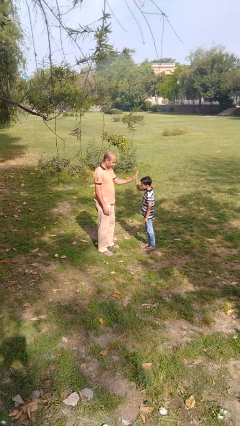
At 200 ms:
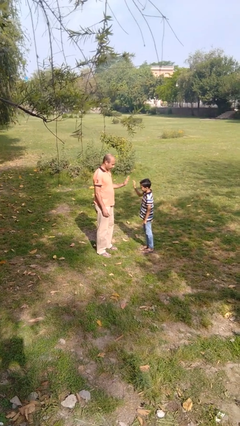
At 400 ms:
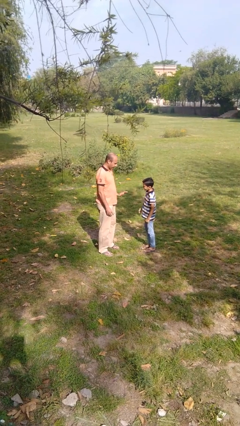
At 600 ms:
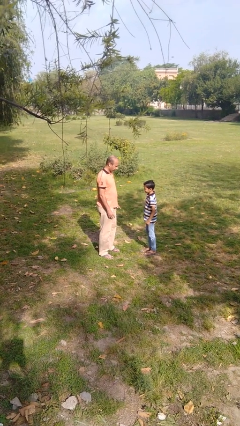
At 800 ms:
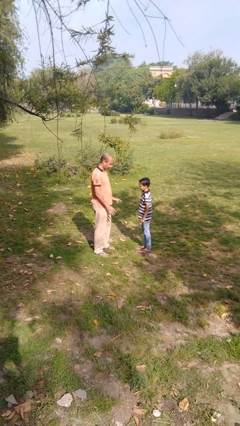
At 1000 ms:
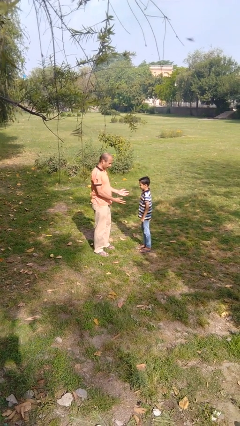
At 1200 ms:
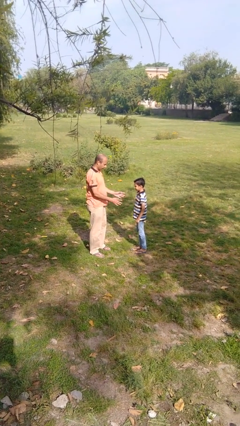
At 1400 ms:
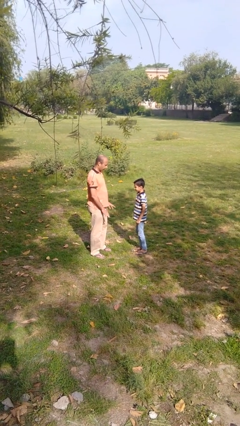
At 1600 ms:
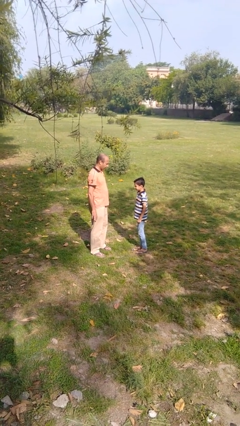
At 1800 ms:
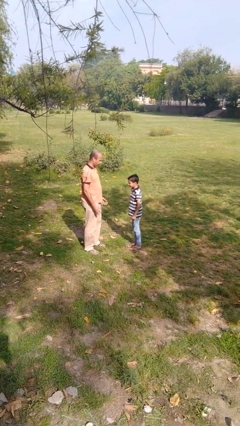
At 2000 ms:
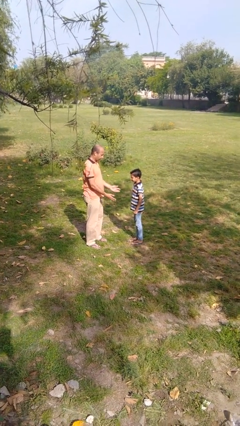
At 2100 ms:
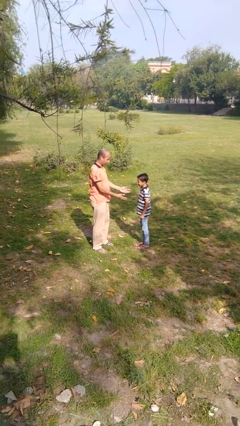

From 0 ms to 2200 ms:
person highfives hand

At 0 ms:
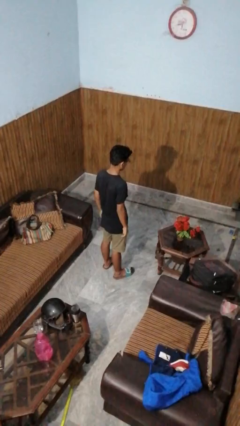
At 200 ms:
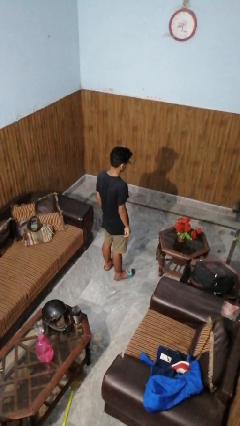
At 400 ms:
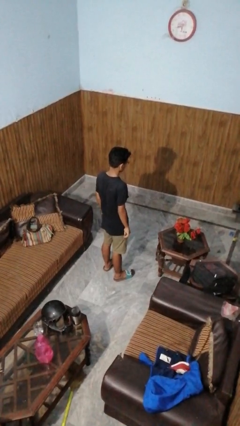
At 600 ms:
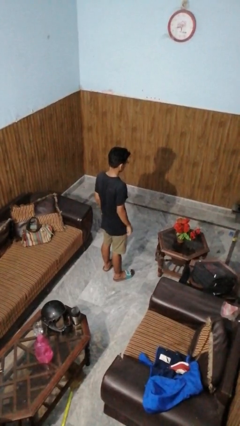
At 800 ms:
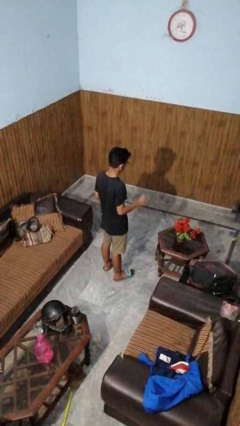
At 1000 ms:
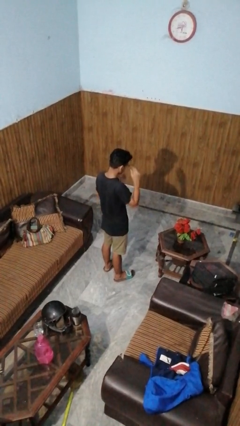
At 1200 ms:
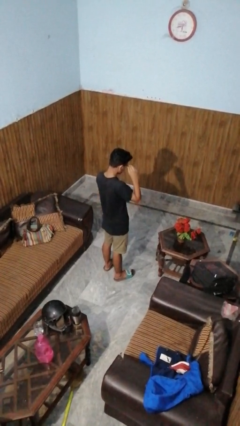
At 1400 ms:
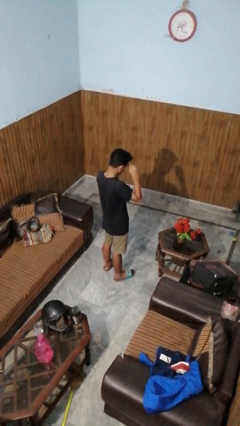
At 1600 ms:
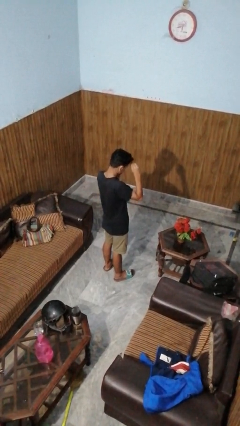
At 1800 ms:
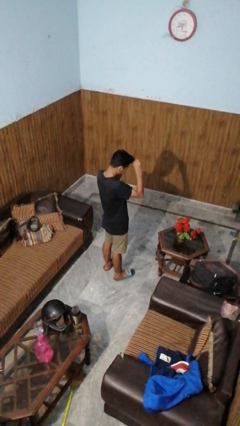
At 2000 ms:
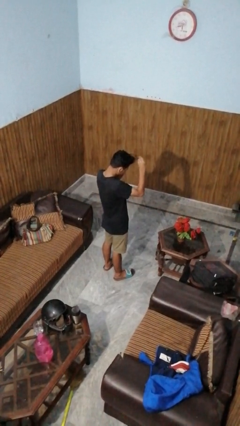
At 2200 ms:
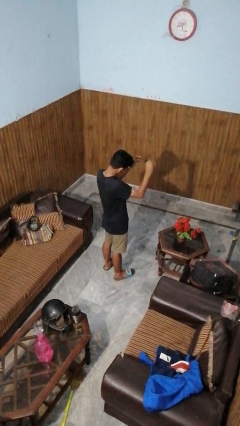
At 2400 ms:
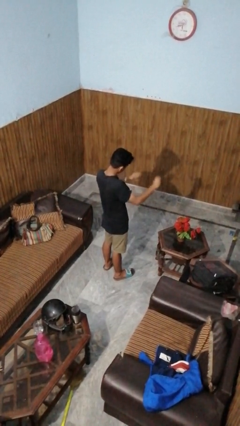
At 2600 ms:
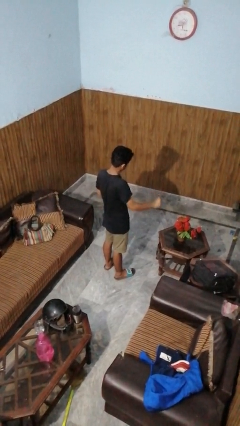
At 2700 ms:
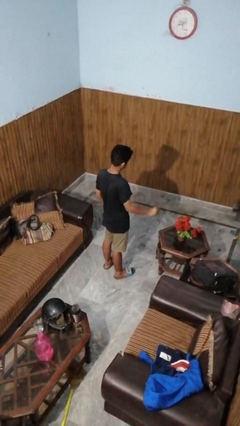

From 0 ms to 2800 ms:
person takes off glasses

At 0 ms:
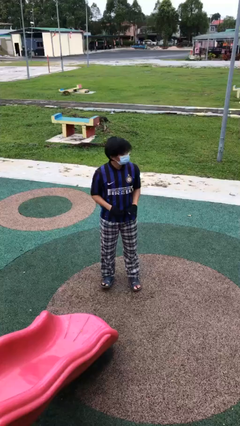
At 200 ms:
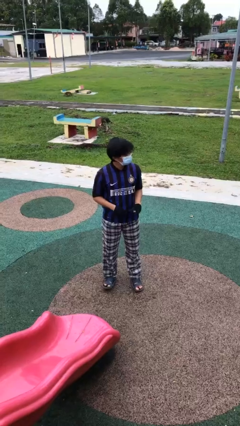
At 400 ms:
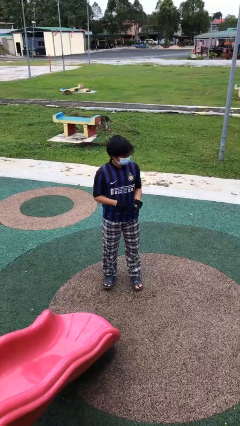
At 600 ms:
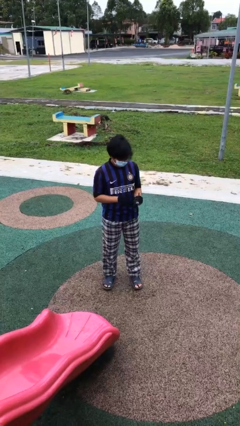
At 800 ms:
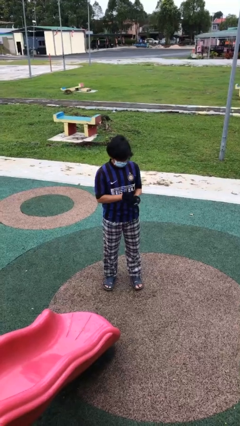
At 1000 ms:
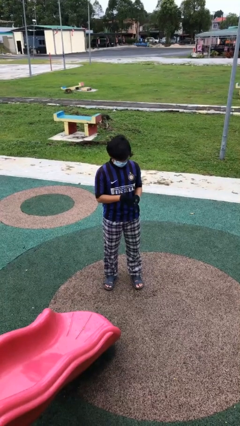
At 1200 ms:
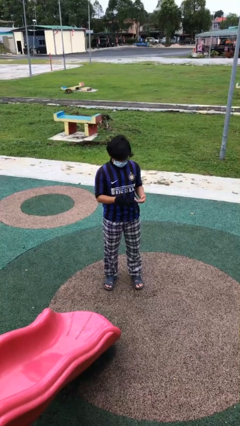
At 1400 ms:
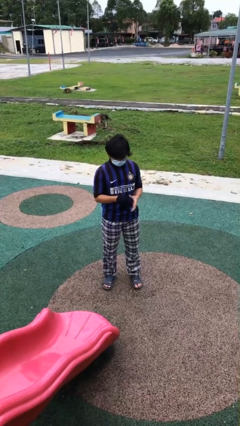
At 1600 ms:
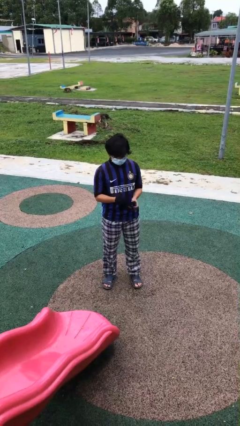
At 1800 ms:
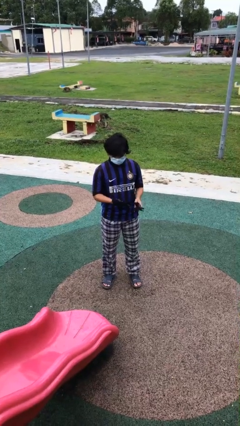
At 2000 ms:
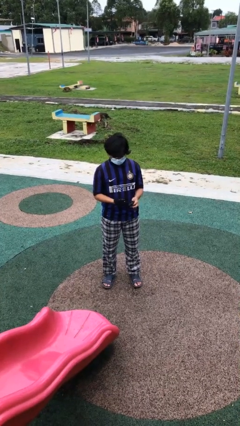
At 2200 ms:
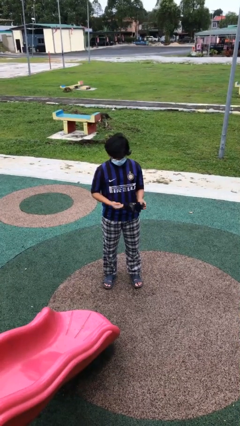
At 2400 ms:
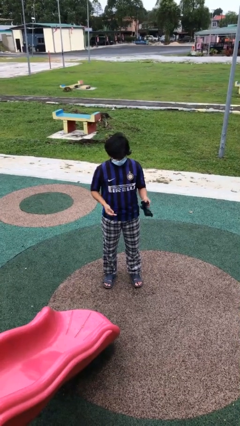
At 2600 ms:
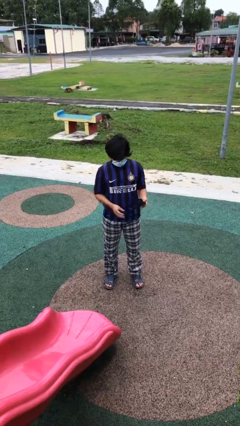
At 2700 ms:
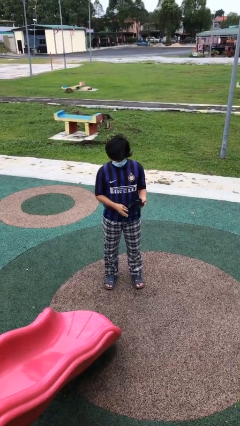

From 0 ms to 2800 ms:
person takes off gloves

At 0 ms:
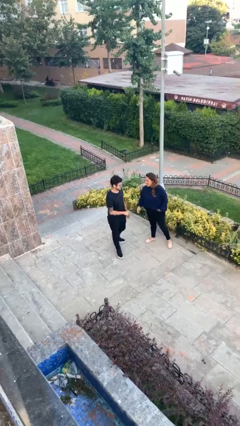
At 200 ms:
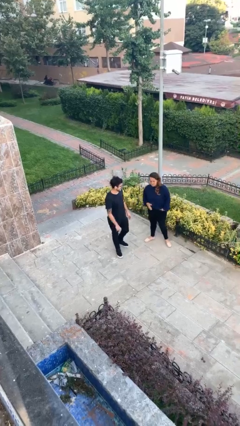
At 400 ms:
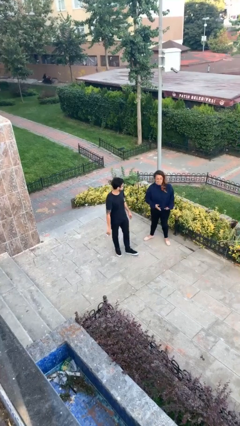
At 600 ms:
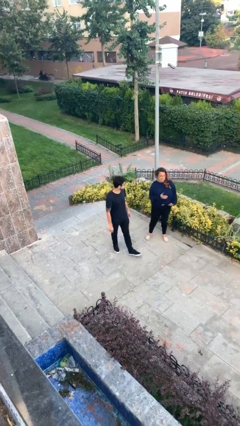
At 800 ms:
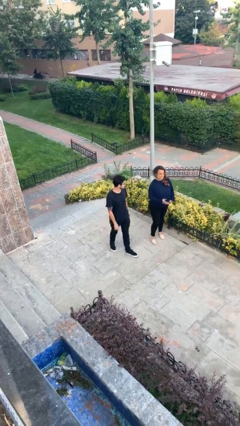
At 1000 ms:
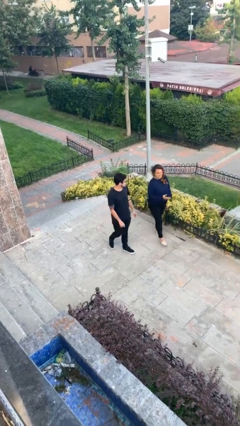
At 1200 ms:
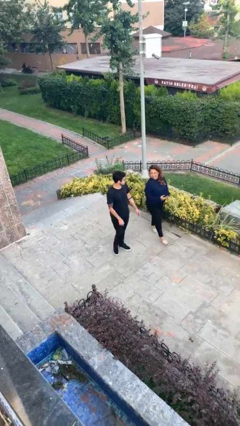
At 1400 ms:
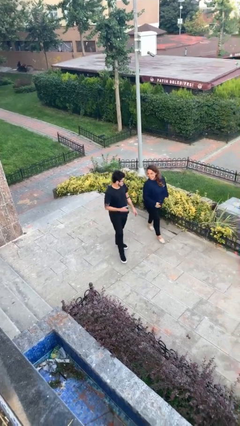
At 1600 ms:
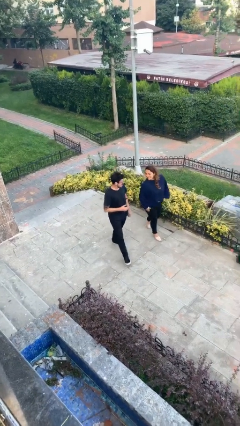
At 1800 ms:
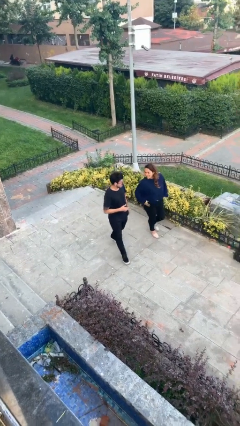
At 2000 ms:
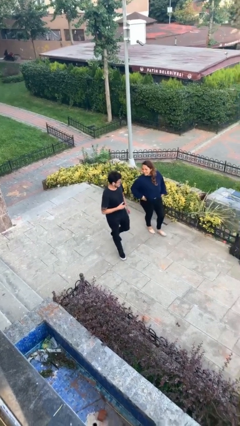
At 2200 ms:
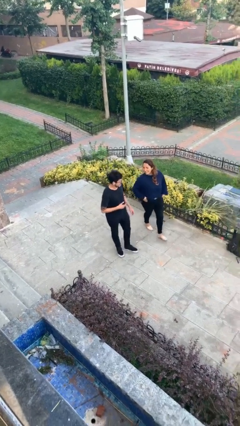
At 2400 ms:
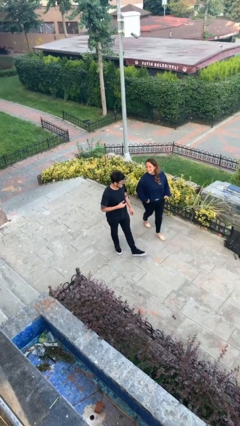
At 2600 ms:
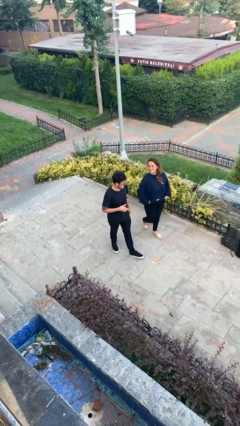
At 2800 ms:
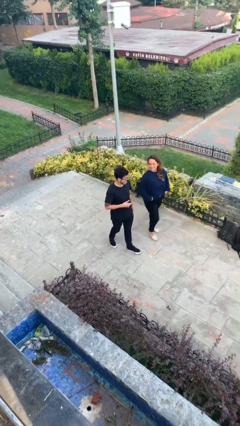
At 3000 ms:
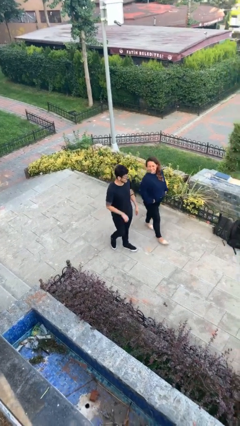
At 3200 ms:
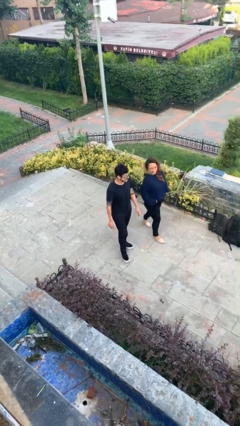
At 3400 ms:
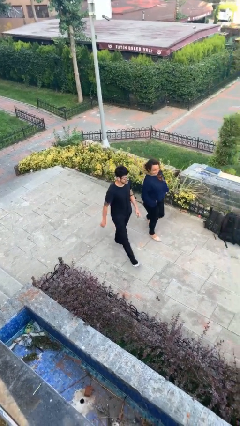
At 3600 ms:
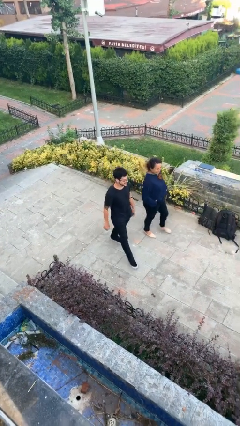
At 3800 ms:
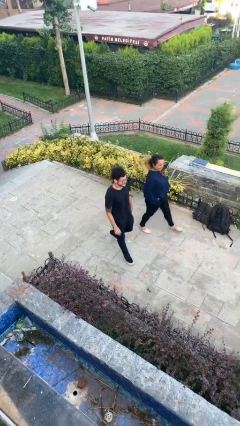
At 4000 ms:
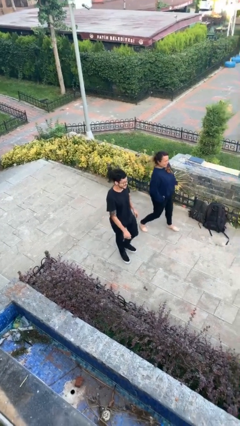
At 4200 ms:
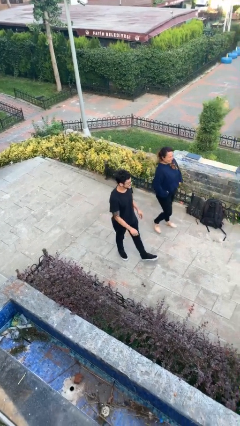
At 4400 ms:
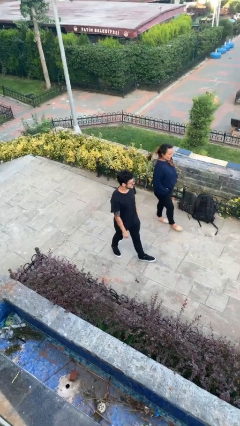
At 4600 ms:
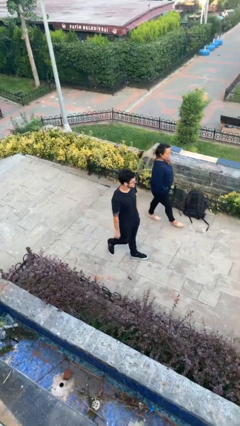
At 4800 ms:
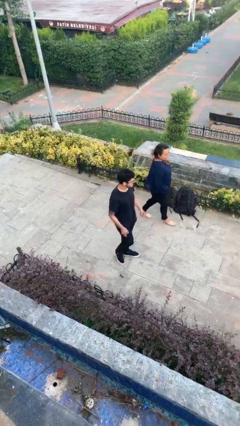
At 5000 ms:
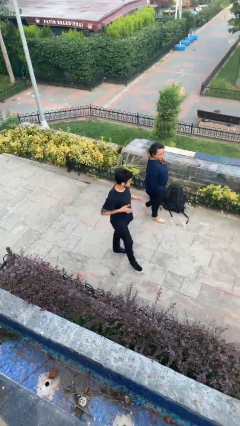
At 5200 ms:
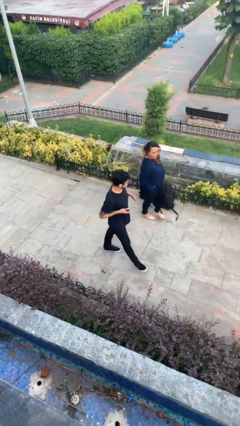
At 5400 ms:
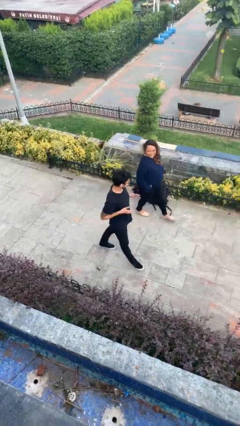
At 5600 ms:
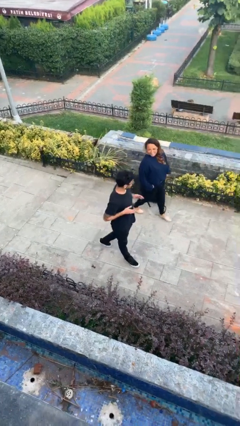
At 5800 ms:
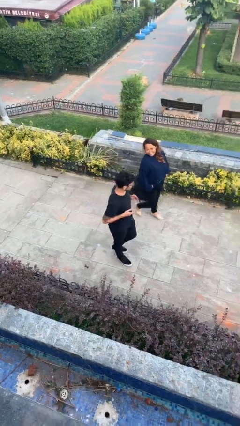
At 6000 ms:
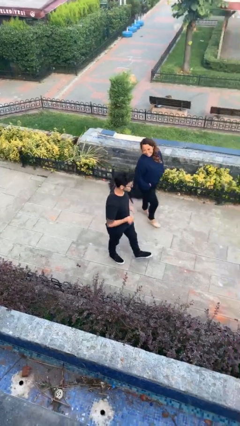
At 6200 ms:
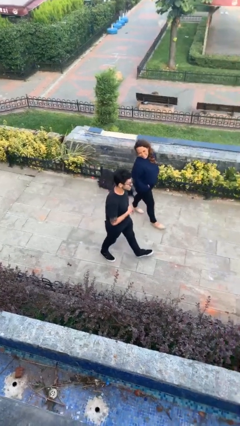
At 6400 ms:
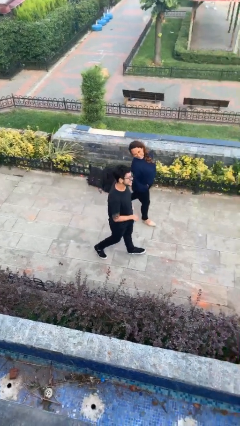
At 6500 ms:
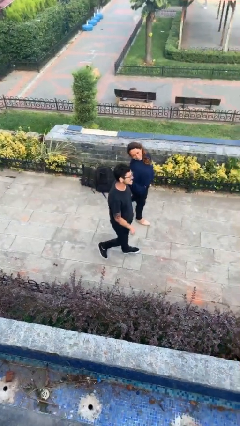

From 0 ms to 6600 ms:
person talks to person

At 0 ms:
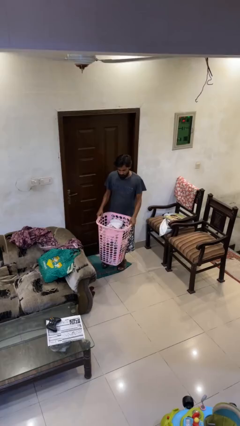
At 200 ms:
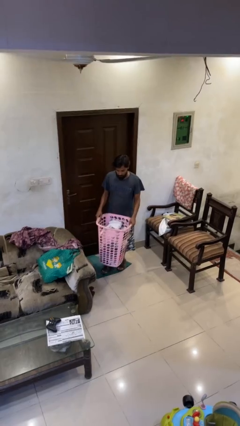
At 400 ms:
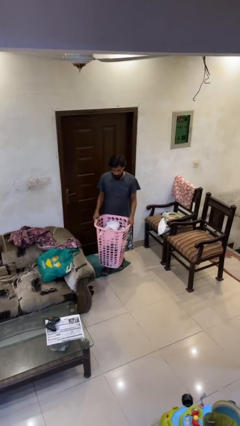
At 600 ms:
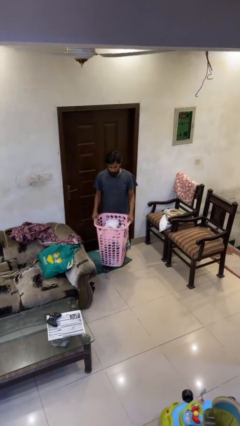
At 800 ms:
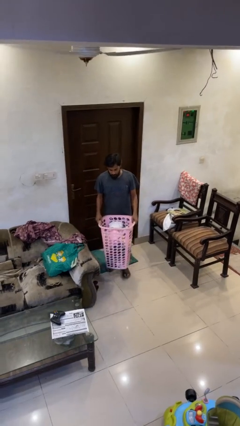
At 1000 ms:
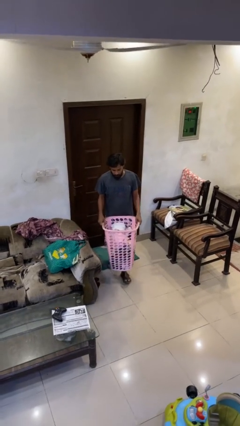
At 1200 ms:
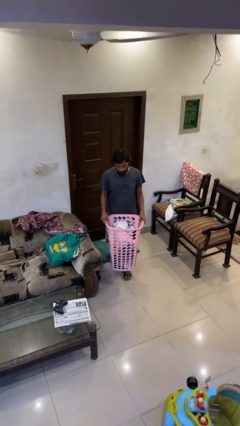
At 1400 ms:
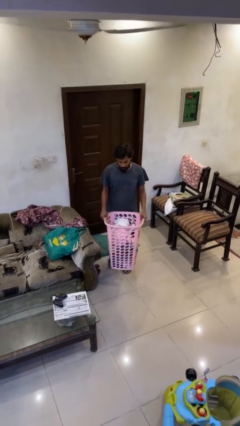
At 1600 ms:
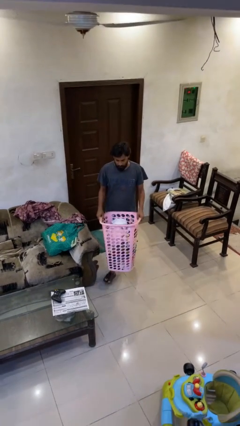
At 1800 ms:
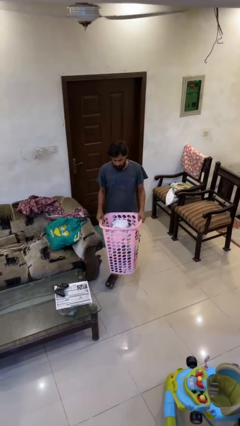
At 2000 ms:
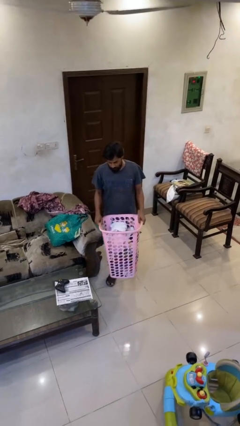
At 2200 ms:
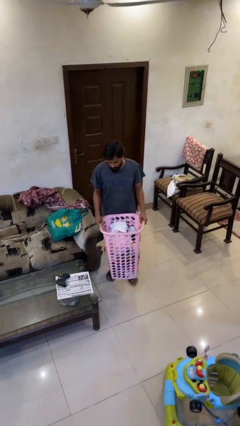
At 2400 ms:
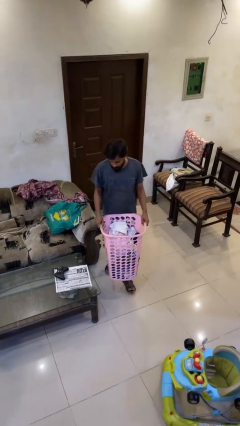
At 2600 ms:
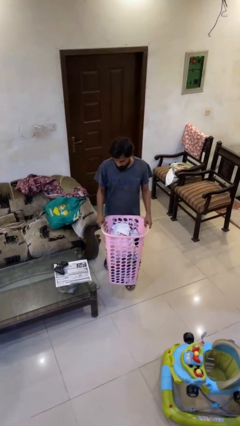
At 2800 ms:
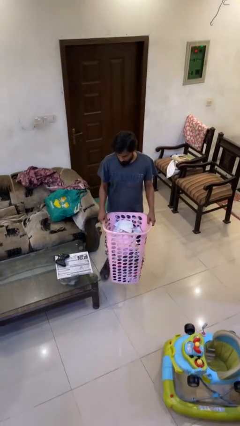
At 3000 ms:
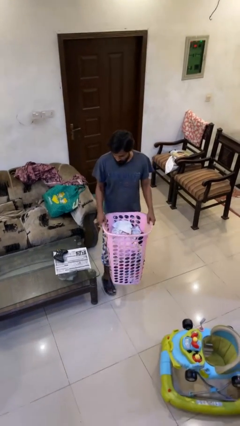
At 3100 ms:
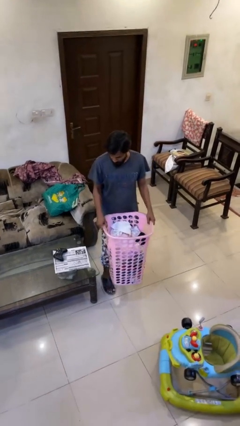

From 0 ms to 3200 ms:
person carries laundry basket
